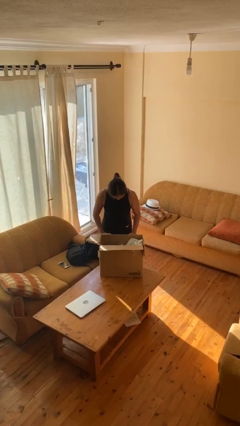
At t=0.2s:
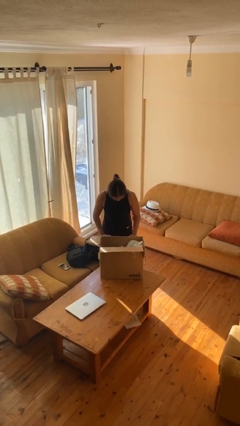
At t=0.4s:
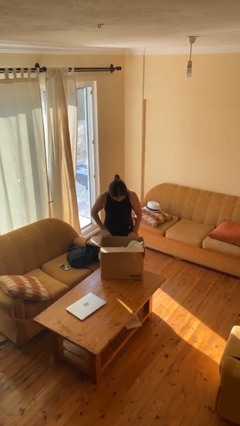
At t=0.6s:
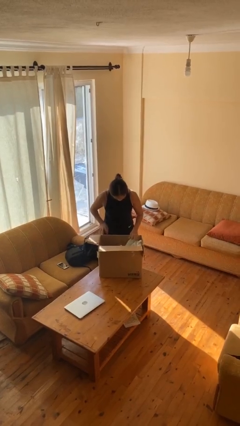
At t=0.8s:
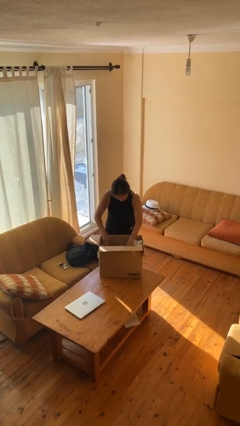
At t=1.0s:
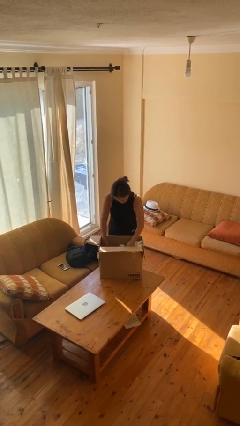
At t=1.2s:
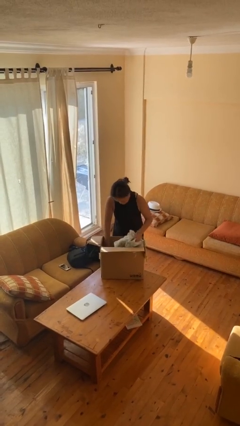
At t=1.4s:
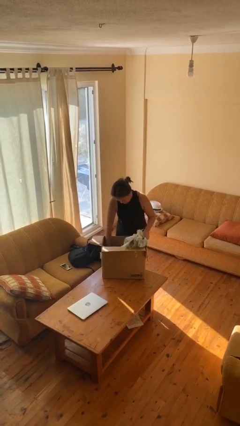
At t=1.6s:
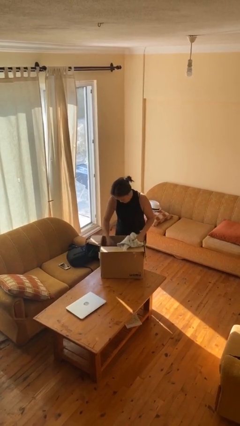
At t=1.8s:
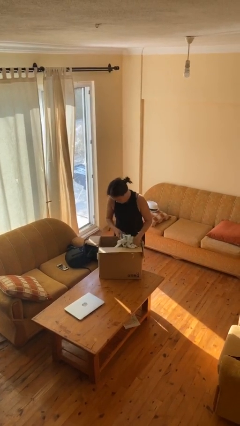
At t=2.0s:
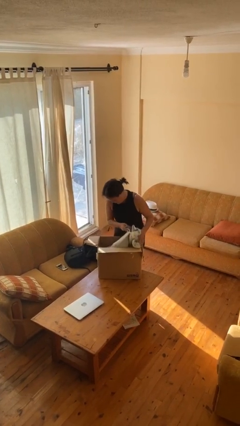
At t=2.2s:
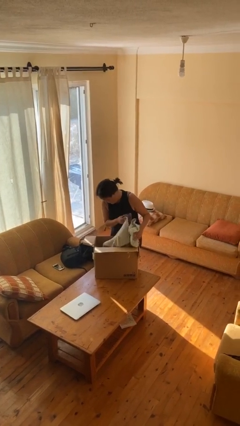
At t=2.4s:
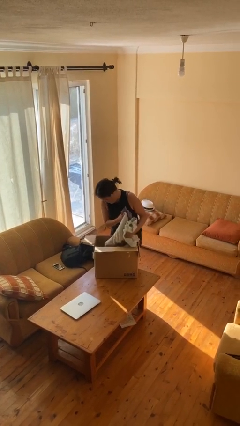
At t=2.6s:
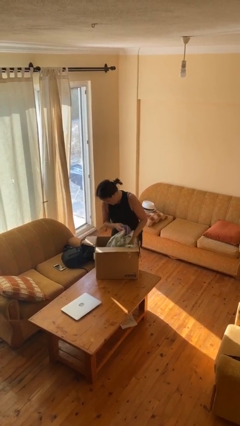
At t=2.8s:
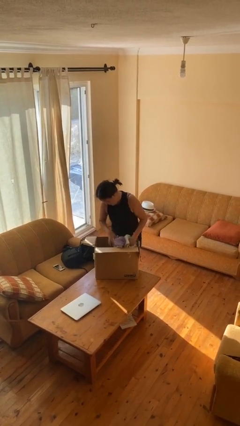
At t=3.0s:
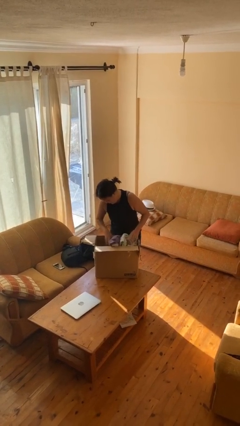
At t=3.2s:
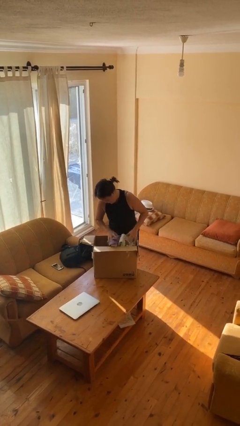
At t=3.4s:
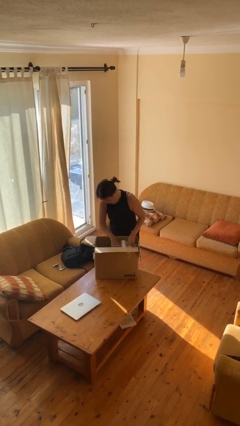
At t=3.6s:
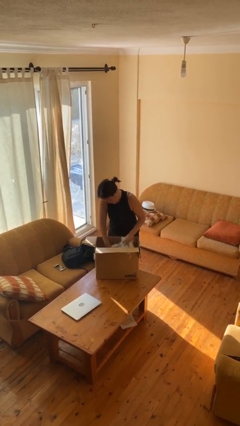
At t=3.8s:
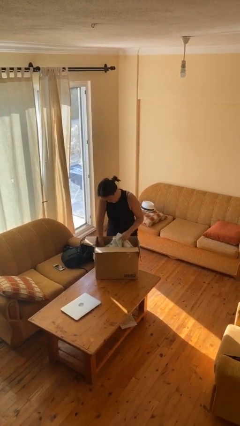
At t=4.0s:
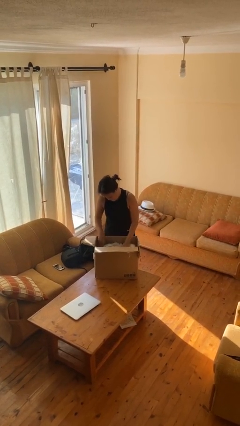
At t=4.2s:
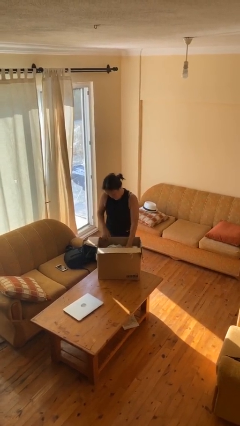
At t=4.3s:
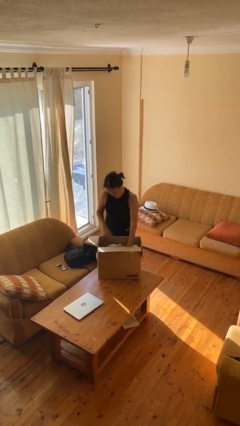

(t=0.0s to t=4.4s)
person searches in box

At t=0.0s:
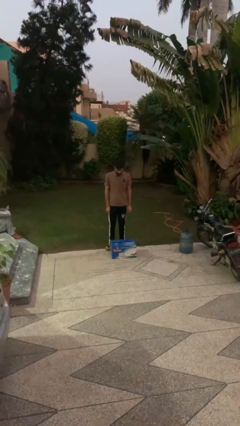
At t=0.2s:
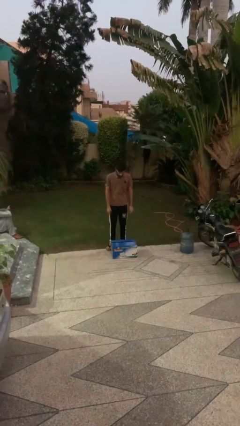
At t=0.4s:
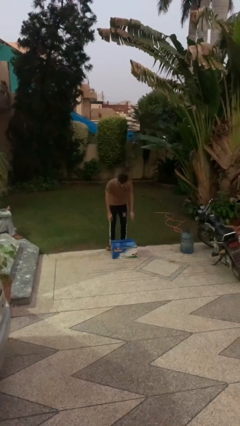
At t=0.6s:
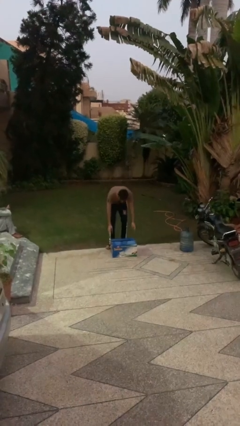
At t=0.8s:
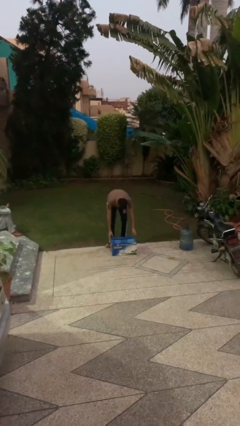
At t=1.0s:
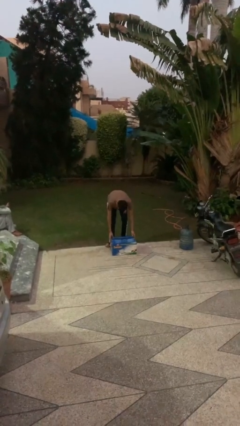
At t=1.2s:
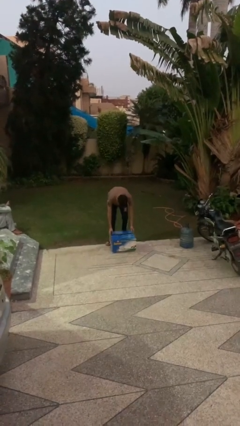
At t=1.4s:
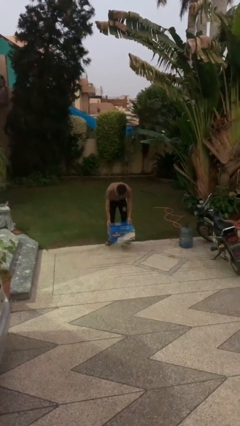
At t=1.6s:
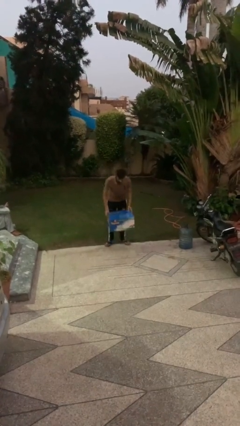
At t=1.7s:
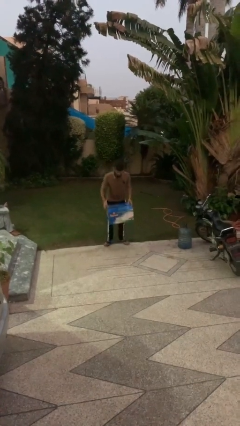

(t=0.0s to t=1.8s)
person picks up object from floor

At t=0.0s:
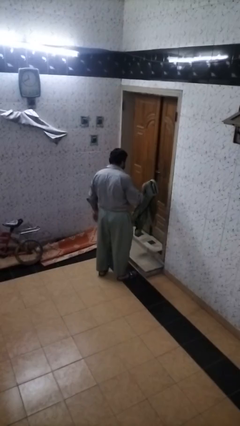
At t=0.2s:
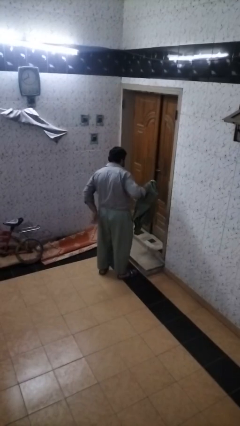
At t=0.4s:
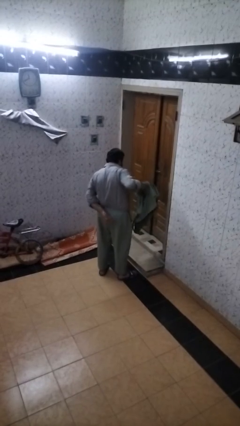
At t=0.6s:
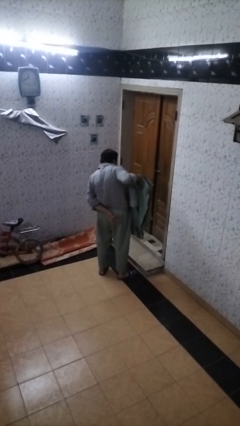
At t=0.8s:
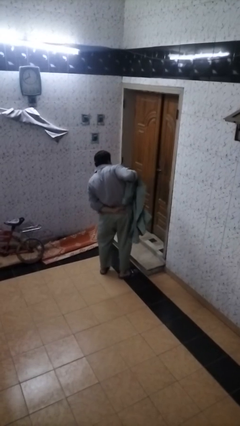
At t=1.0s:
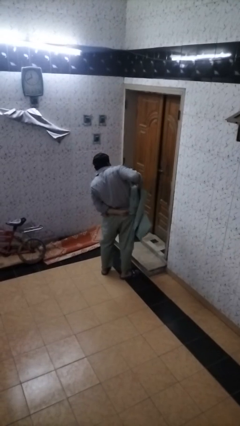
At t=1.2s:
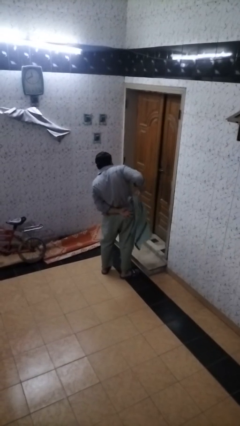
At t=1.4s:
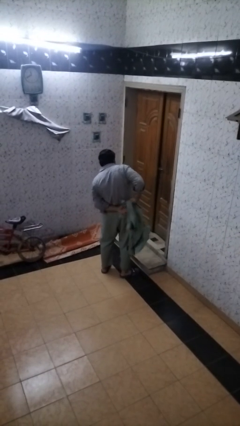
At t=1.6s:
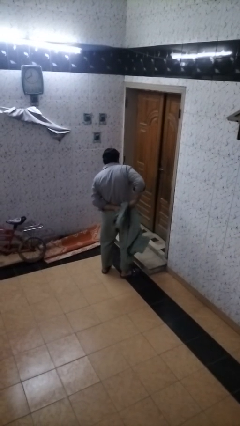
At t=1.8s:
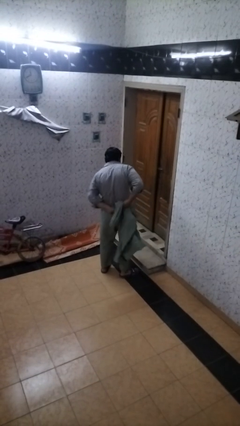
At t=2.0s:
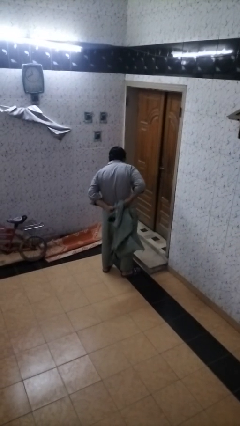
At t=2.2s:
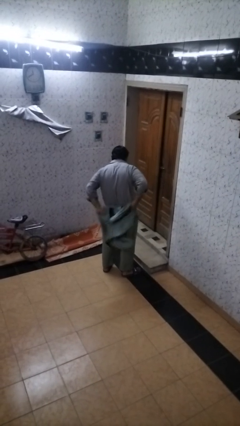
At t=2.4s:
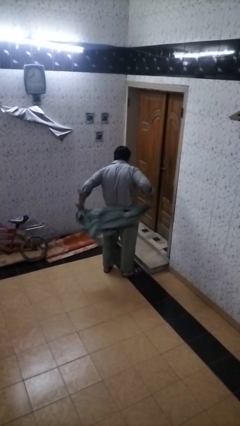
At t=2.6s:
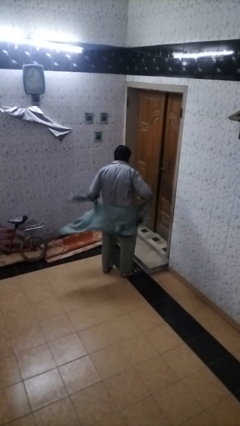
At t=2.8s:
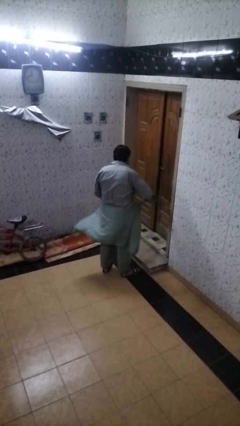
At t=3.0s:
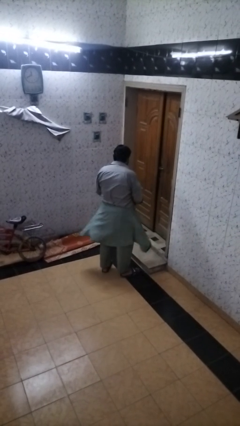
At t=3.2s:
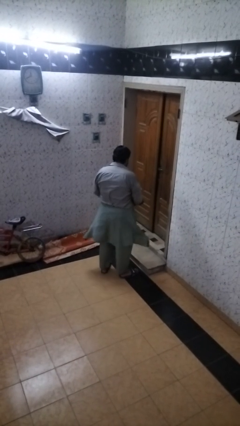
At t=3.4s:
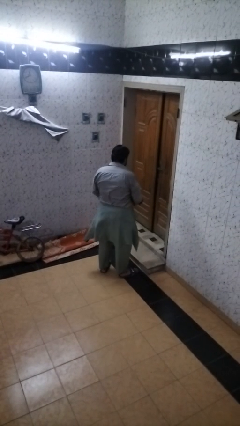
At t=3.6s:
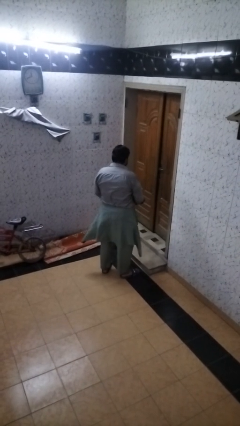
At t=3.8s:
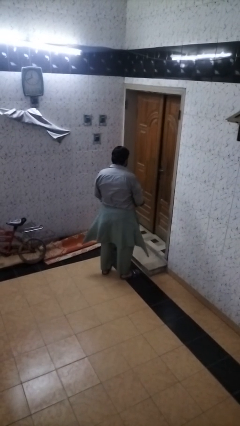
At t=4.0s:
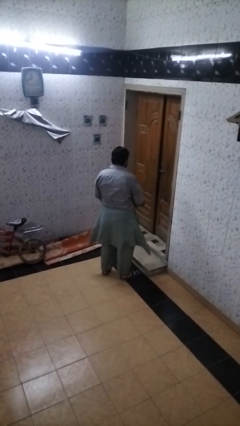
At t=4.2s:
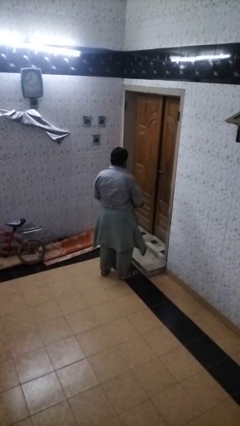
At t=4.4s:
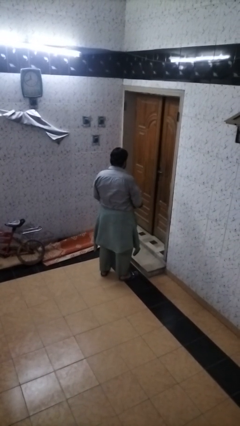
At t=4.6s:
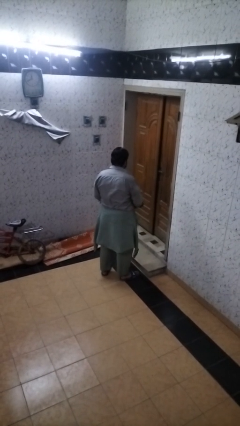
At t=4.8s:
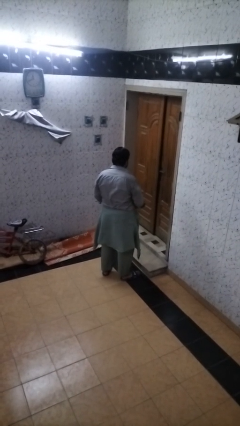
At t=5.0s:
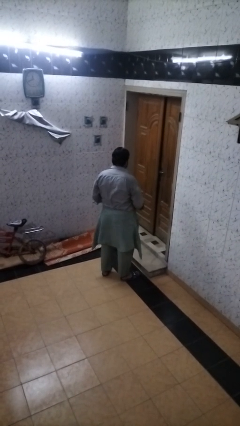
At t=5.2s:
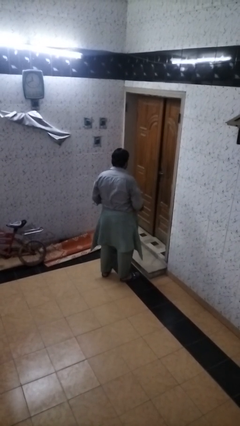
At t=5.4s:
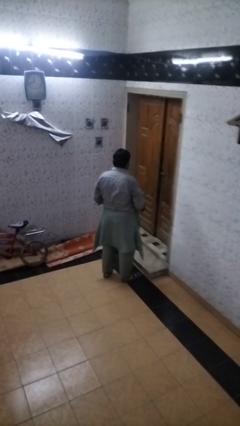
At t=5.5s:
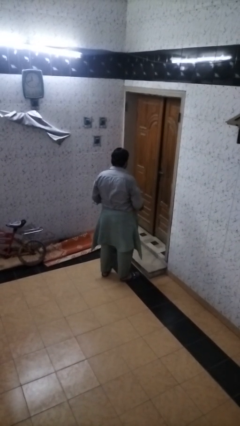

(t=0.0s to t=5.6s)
person ties jacket around waist

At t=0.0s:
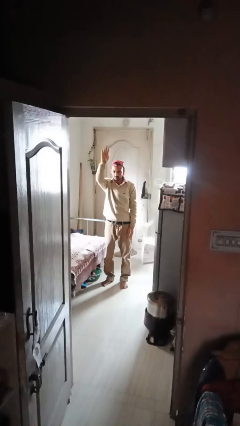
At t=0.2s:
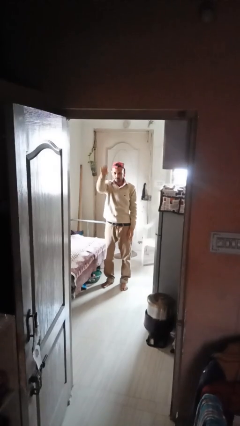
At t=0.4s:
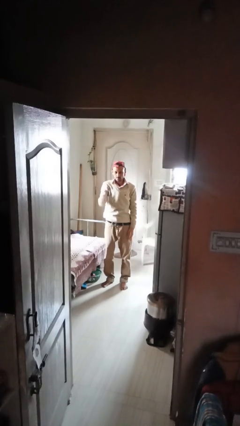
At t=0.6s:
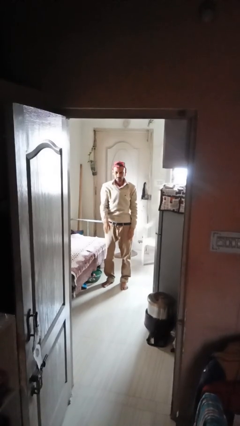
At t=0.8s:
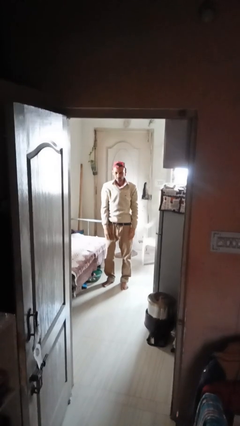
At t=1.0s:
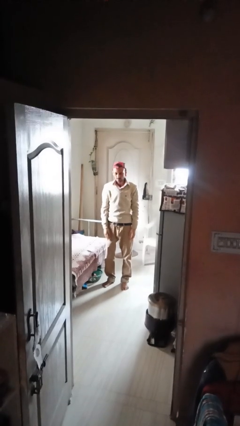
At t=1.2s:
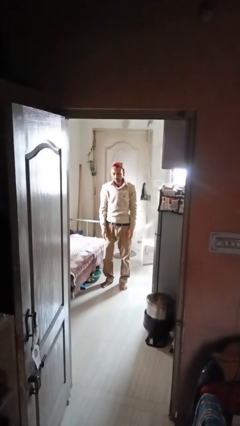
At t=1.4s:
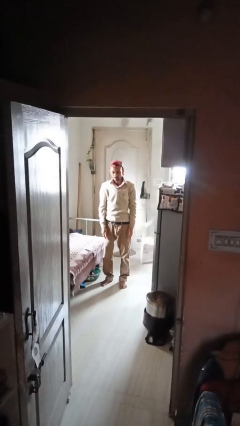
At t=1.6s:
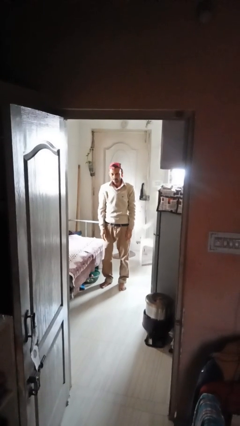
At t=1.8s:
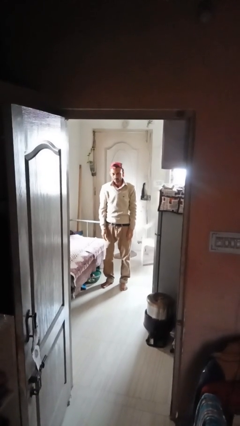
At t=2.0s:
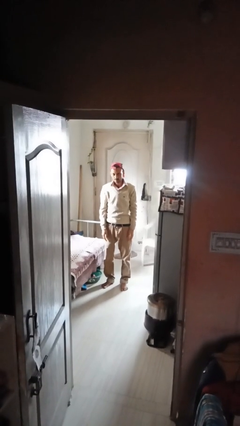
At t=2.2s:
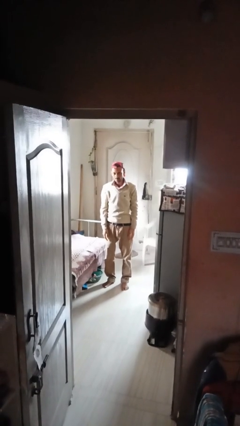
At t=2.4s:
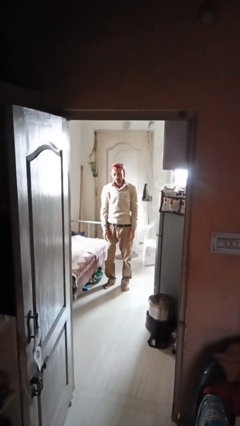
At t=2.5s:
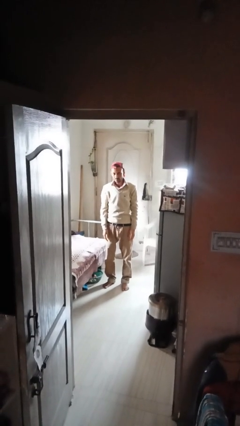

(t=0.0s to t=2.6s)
person gestures lower hand

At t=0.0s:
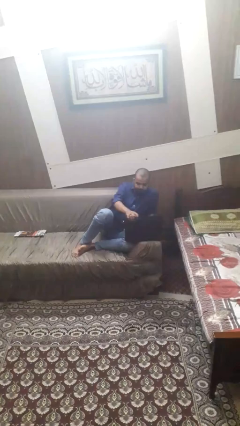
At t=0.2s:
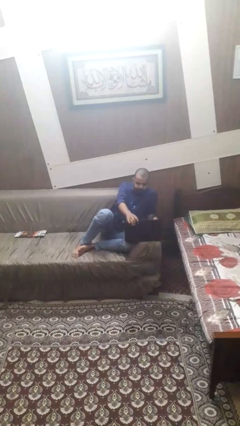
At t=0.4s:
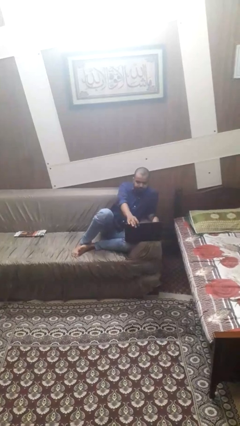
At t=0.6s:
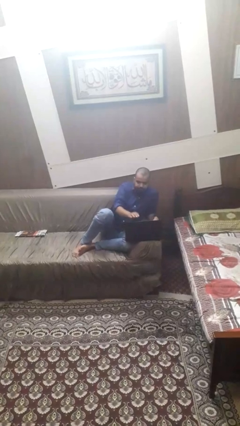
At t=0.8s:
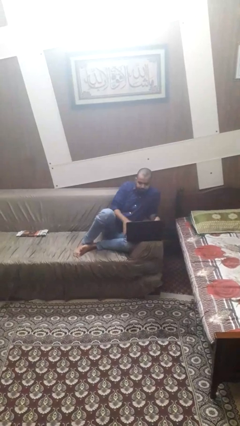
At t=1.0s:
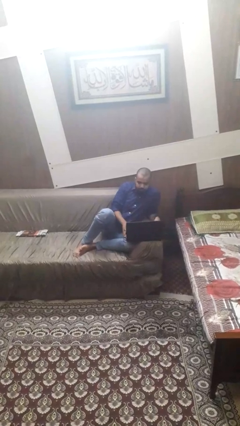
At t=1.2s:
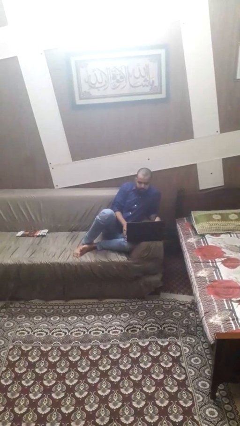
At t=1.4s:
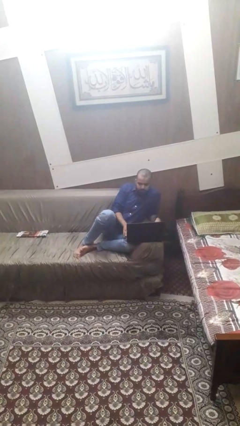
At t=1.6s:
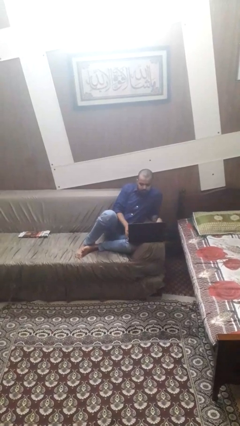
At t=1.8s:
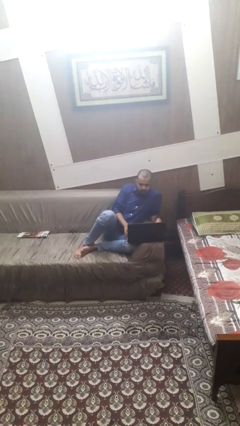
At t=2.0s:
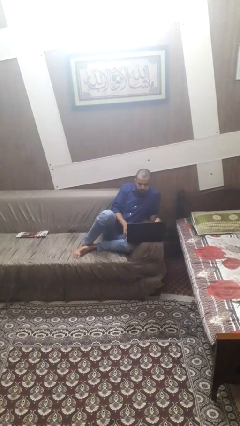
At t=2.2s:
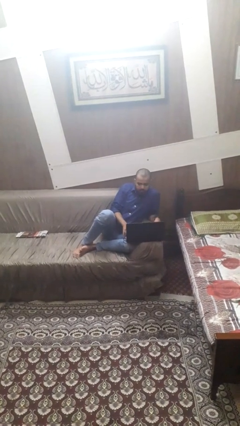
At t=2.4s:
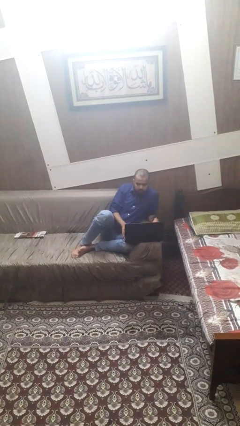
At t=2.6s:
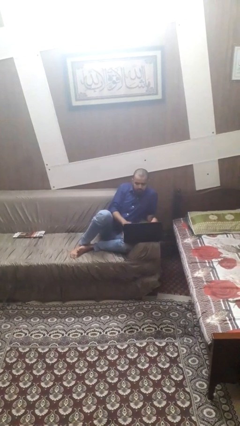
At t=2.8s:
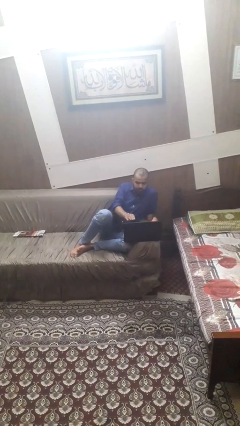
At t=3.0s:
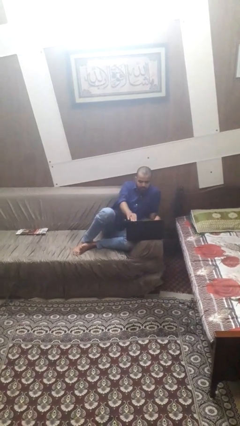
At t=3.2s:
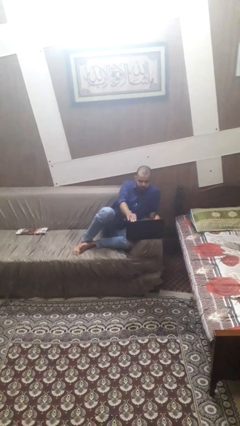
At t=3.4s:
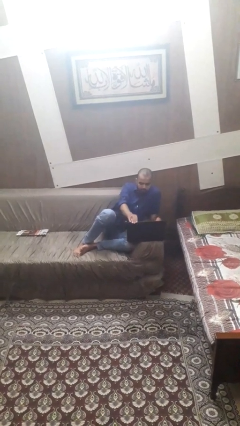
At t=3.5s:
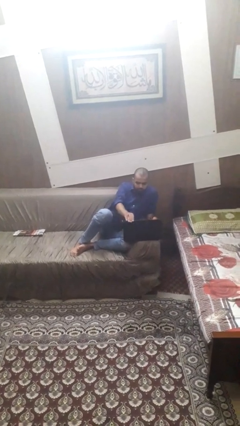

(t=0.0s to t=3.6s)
person opens laptop
